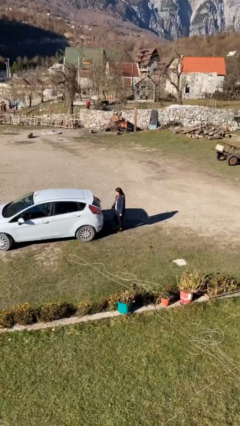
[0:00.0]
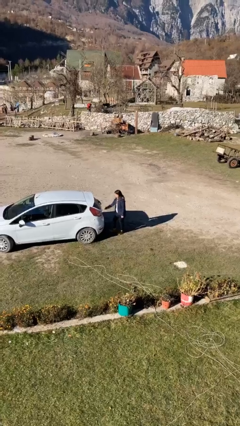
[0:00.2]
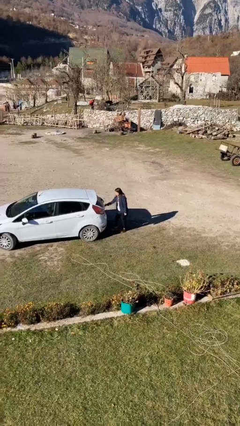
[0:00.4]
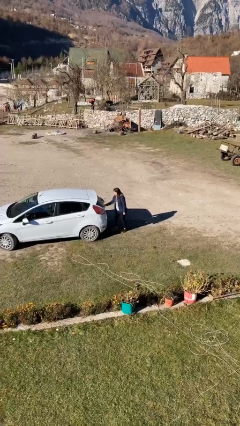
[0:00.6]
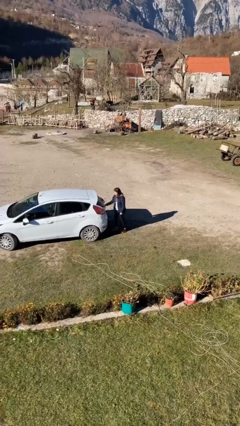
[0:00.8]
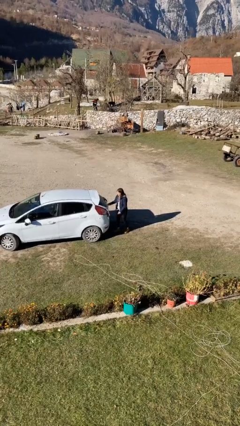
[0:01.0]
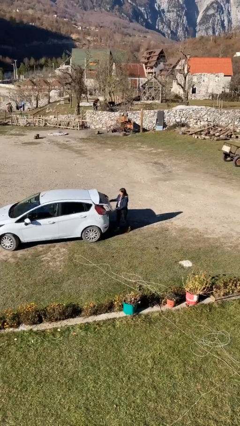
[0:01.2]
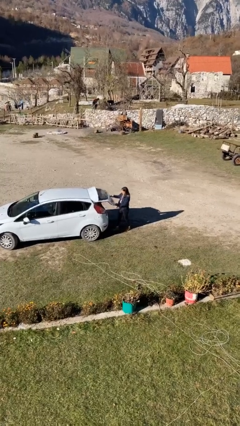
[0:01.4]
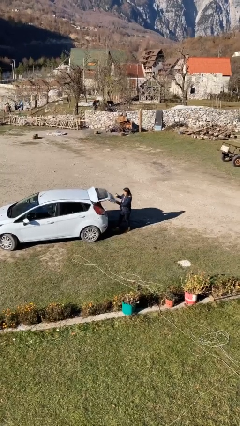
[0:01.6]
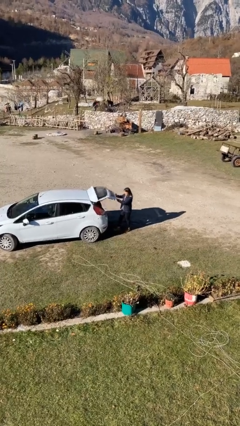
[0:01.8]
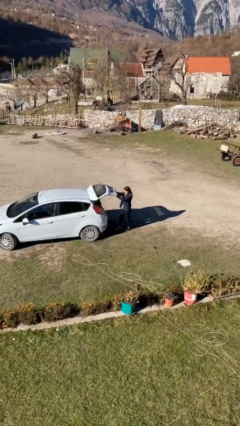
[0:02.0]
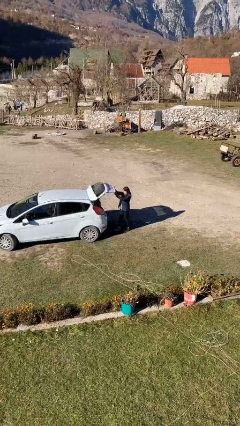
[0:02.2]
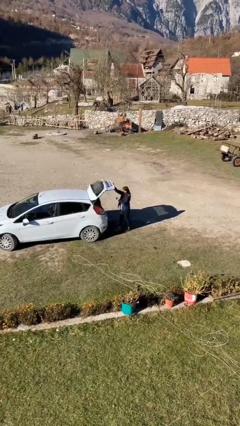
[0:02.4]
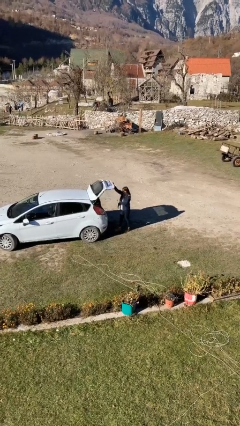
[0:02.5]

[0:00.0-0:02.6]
person opens car trunk

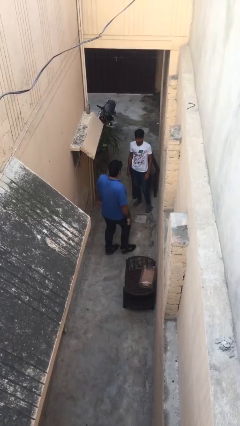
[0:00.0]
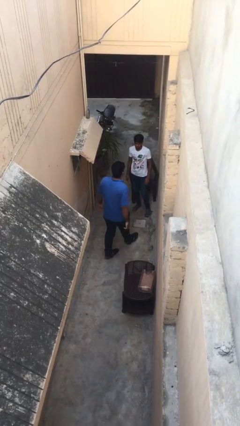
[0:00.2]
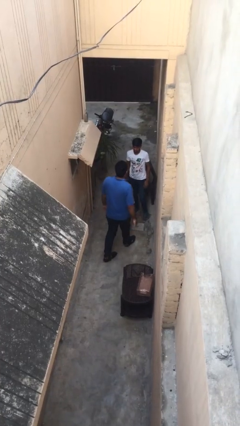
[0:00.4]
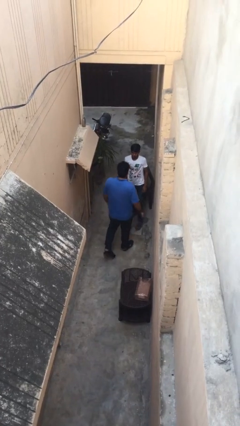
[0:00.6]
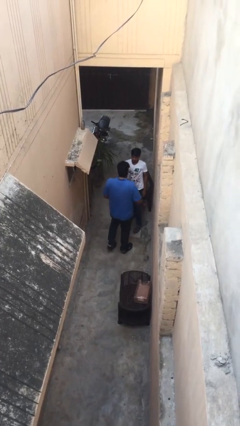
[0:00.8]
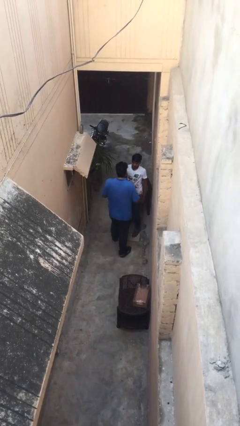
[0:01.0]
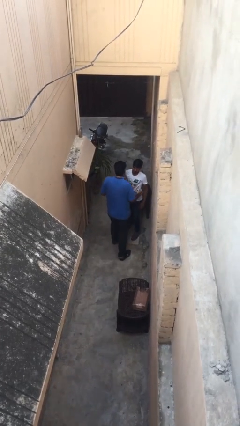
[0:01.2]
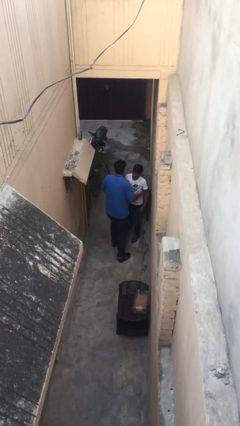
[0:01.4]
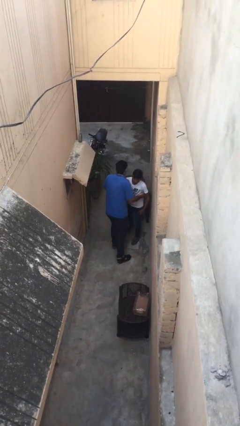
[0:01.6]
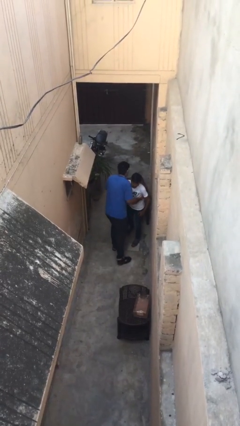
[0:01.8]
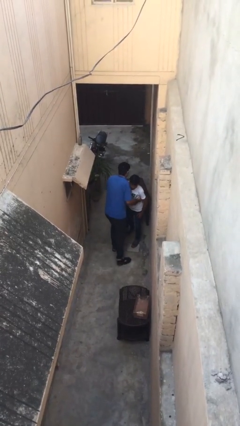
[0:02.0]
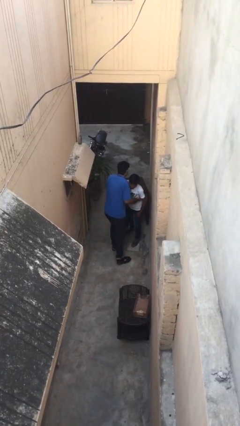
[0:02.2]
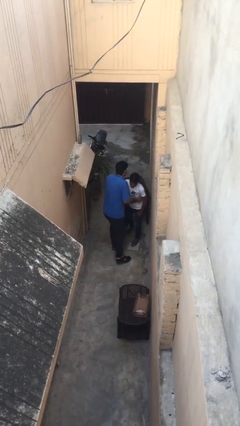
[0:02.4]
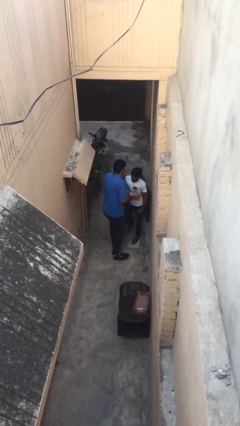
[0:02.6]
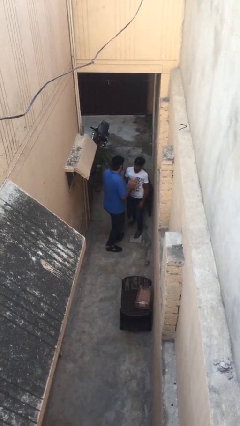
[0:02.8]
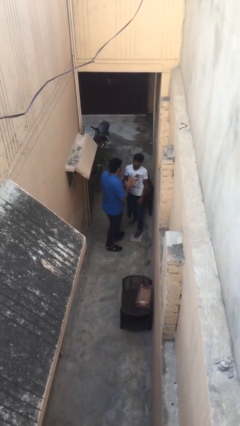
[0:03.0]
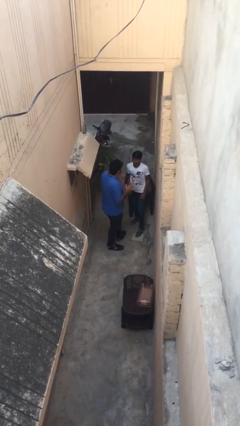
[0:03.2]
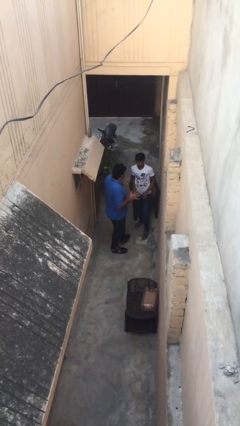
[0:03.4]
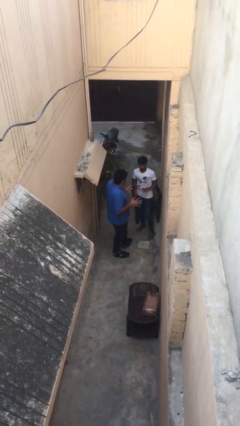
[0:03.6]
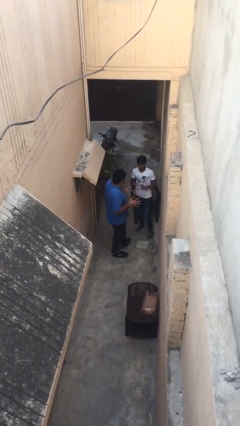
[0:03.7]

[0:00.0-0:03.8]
person embraces person

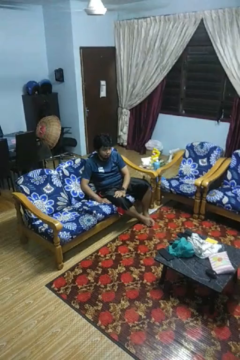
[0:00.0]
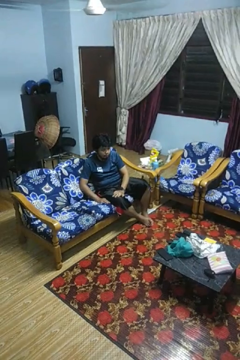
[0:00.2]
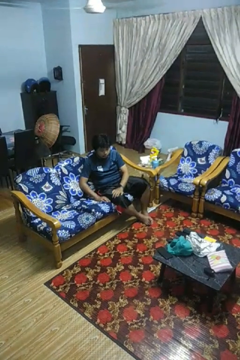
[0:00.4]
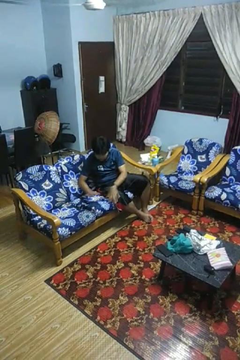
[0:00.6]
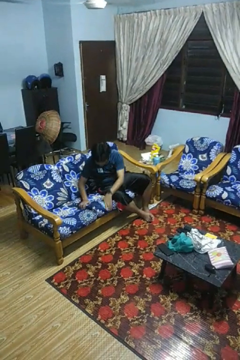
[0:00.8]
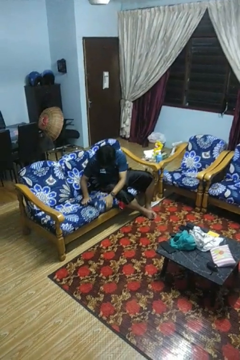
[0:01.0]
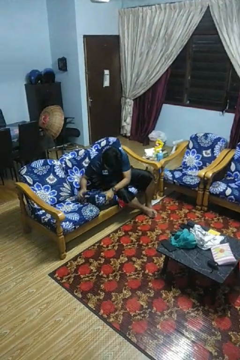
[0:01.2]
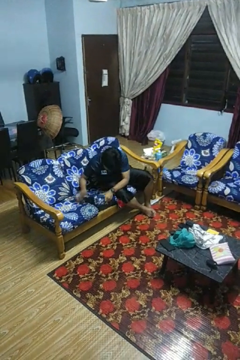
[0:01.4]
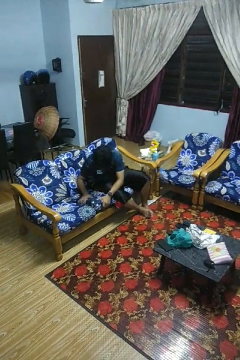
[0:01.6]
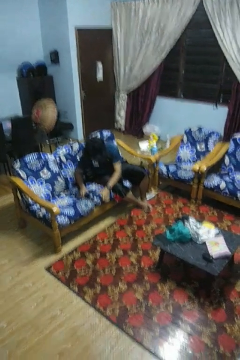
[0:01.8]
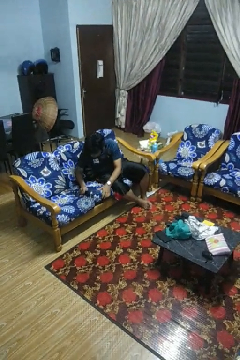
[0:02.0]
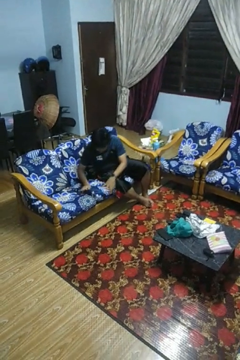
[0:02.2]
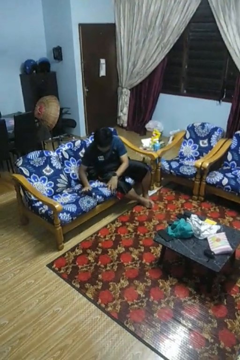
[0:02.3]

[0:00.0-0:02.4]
person searches in couch

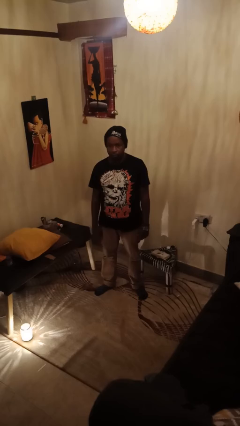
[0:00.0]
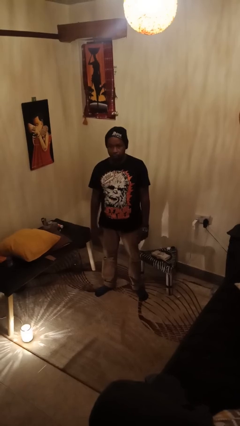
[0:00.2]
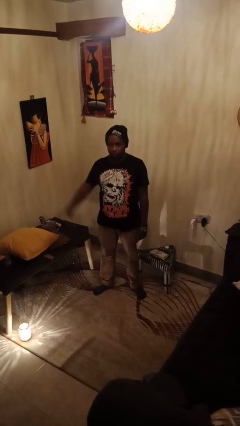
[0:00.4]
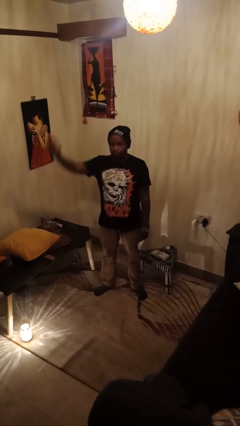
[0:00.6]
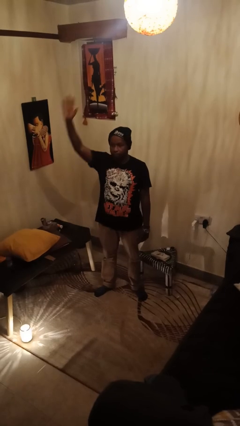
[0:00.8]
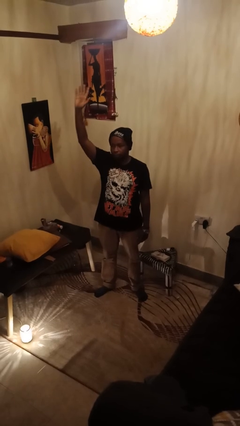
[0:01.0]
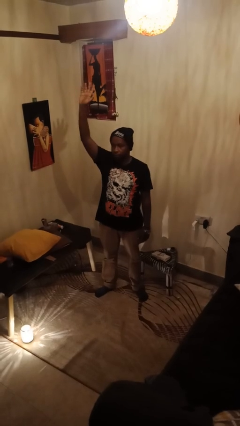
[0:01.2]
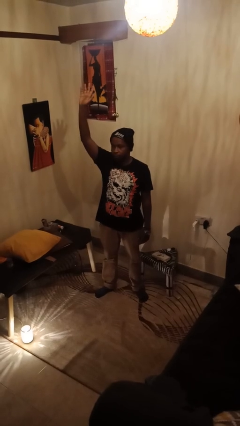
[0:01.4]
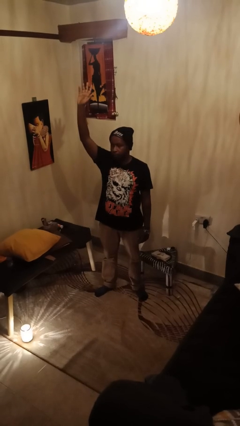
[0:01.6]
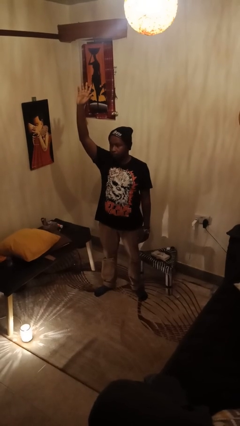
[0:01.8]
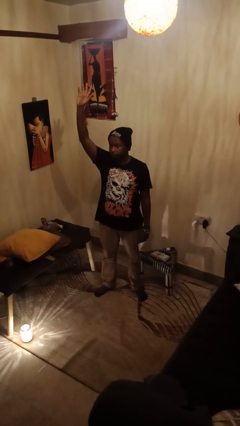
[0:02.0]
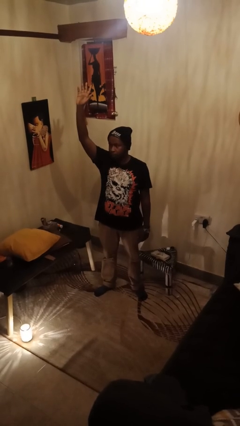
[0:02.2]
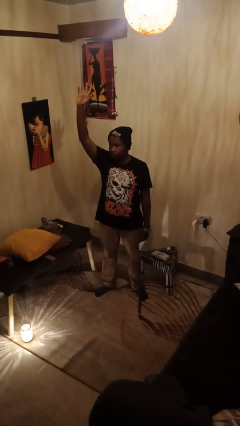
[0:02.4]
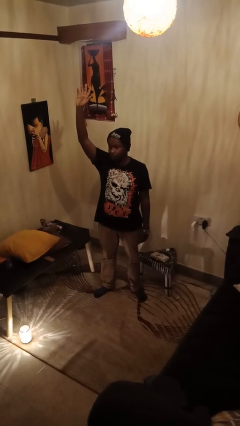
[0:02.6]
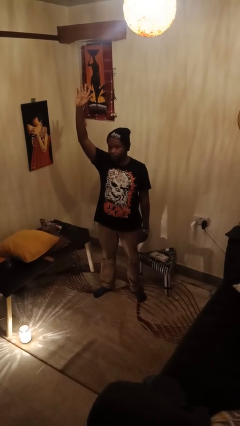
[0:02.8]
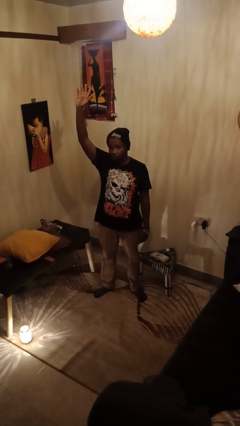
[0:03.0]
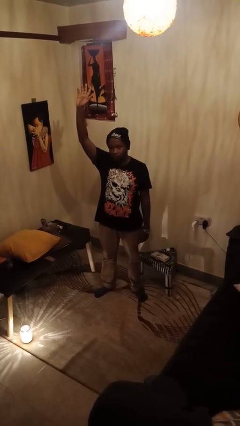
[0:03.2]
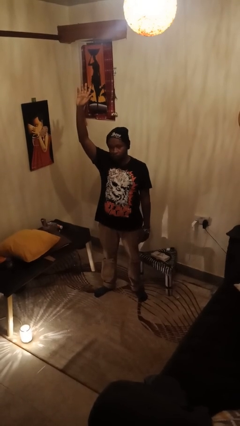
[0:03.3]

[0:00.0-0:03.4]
person gestures raise hand

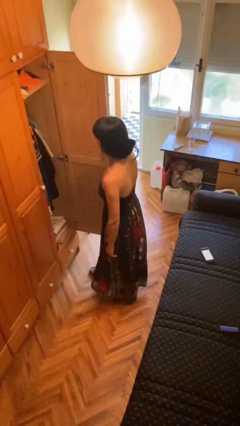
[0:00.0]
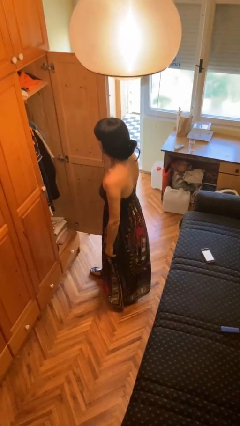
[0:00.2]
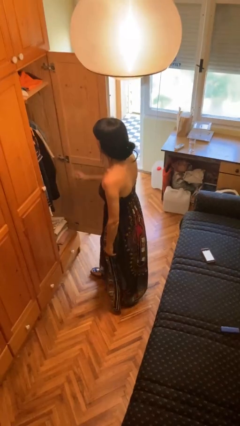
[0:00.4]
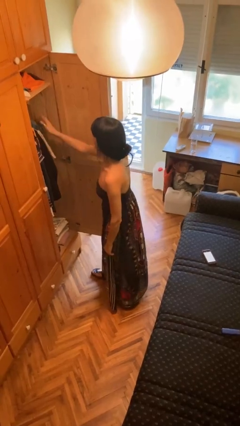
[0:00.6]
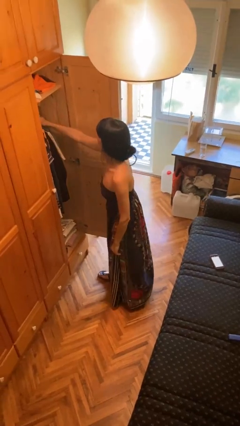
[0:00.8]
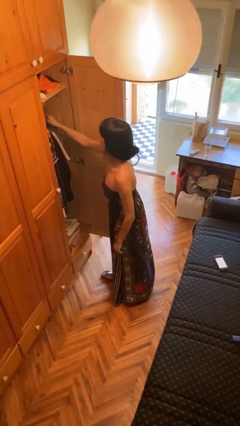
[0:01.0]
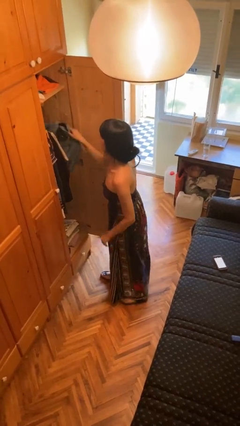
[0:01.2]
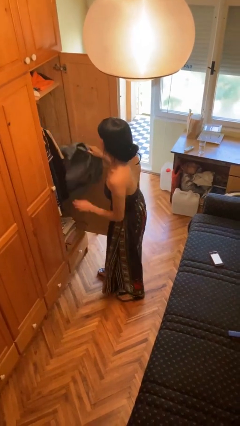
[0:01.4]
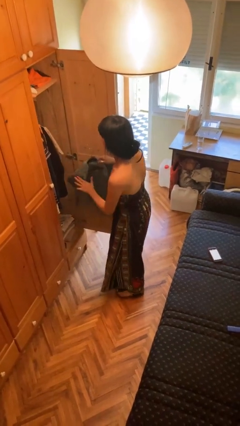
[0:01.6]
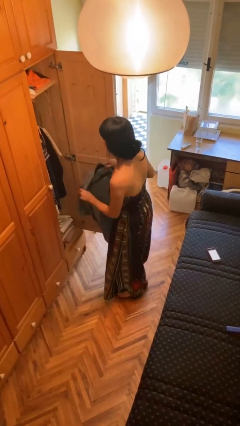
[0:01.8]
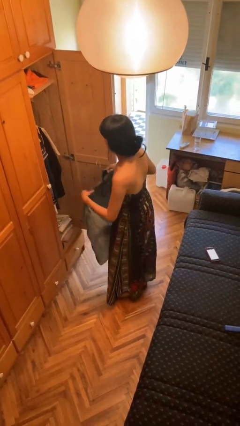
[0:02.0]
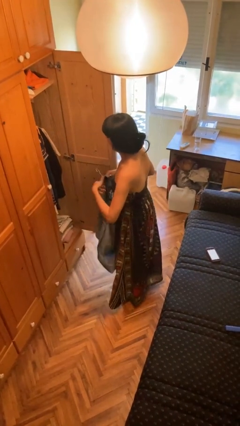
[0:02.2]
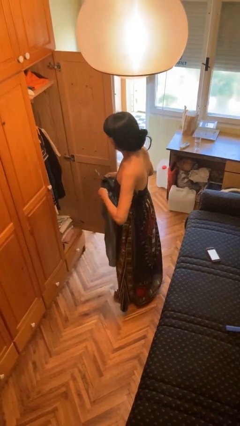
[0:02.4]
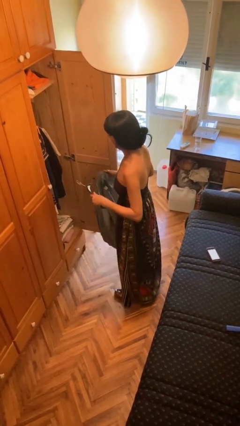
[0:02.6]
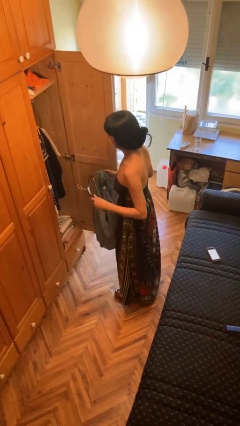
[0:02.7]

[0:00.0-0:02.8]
person takes clothes from closet

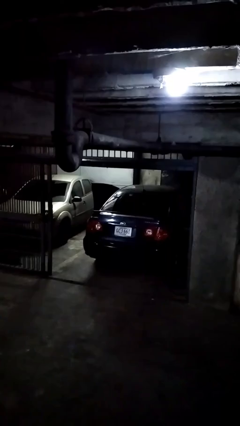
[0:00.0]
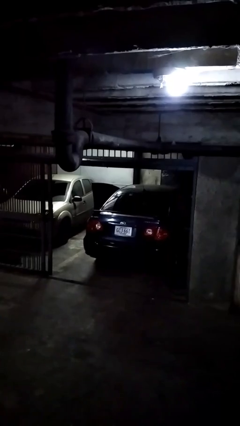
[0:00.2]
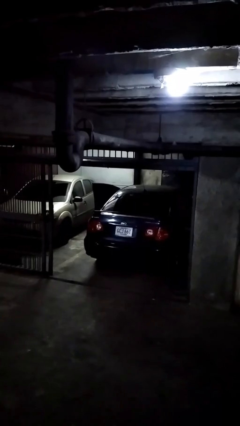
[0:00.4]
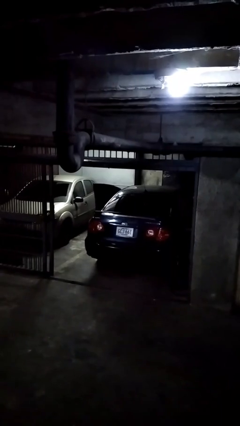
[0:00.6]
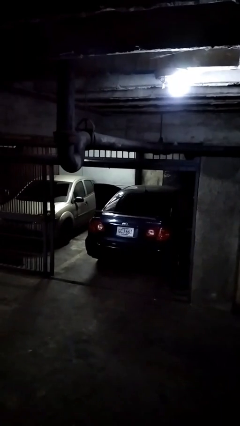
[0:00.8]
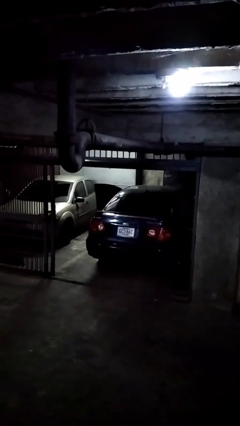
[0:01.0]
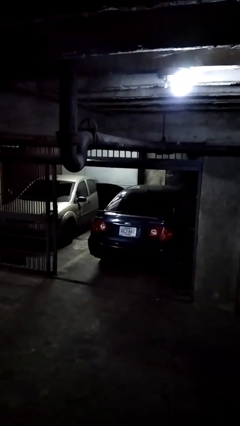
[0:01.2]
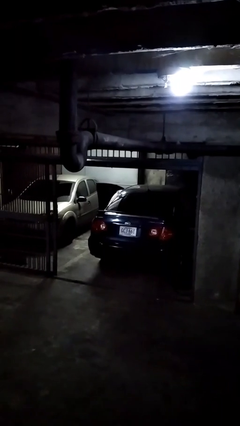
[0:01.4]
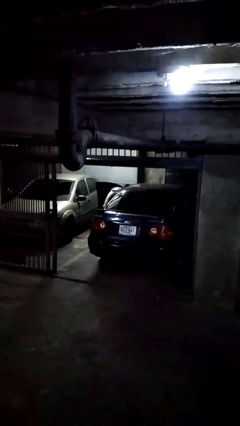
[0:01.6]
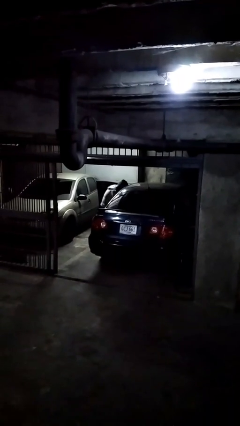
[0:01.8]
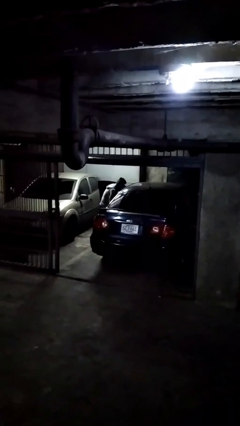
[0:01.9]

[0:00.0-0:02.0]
person unloads car

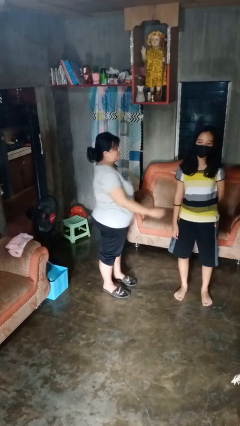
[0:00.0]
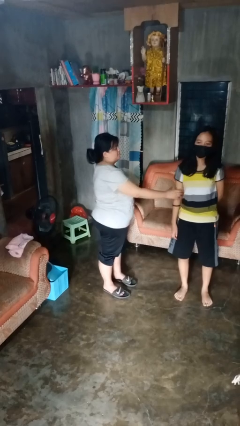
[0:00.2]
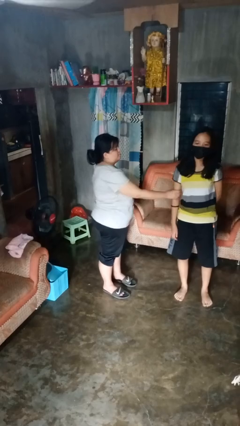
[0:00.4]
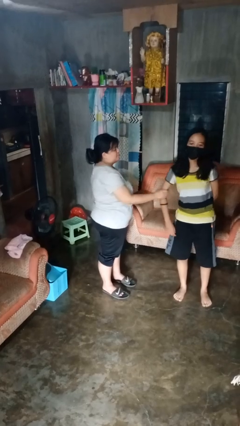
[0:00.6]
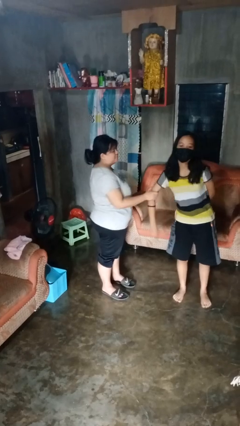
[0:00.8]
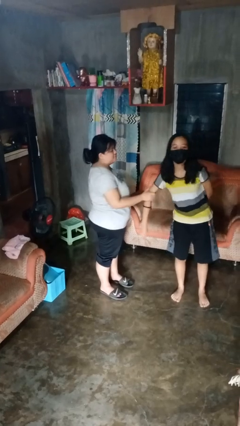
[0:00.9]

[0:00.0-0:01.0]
person grabs person by bicep
